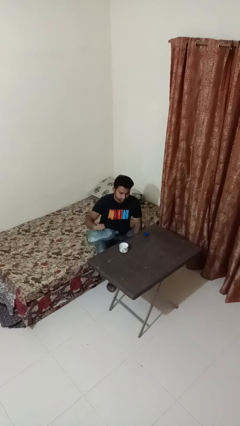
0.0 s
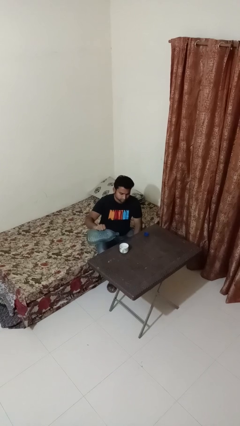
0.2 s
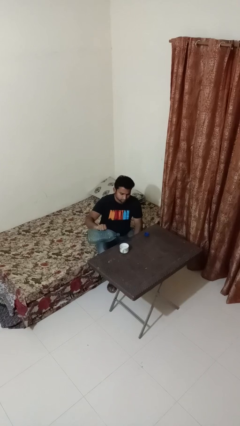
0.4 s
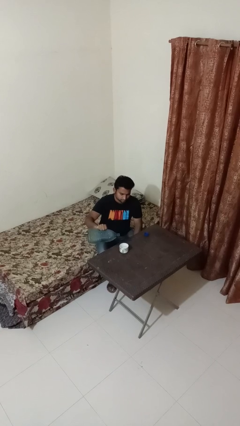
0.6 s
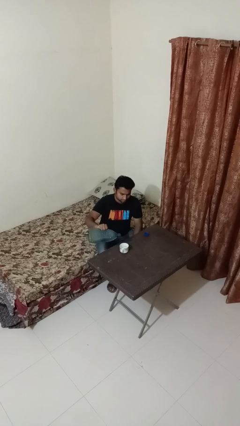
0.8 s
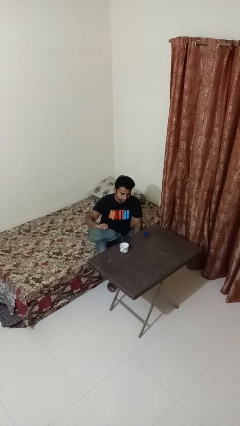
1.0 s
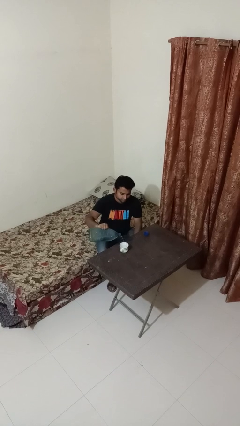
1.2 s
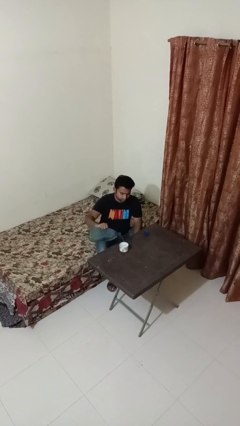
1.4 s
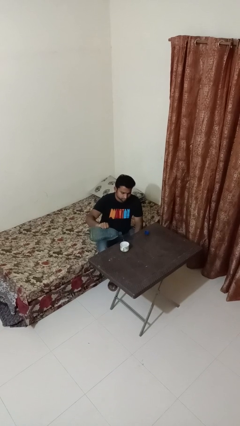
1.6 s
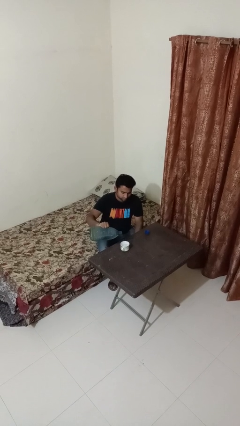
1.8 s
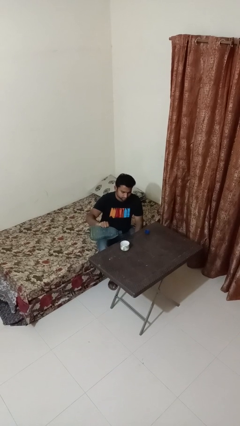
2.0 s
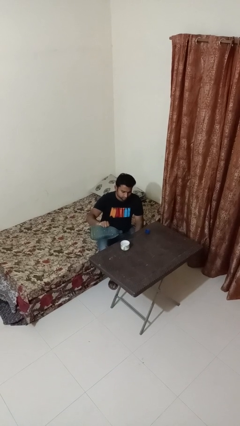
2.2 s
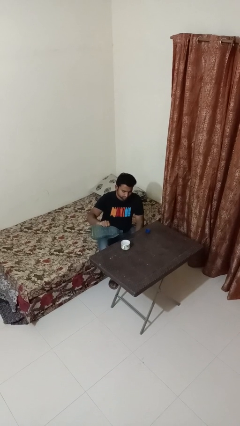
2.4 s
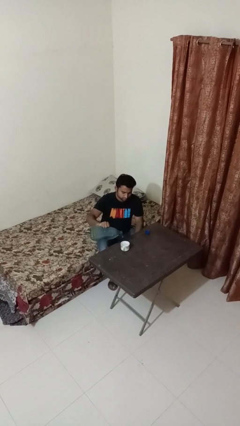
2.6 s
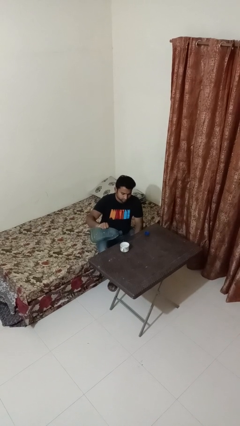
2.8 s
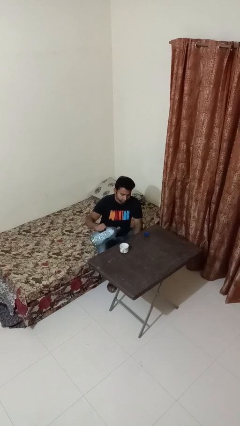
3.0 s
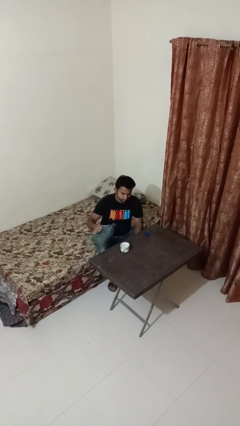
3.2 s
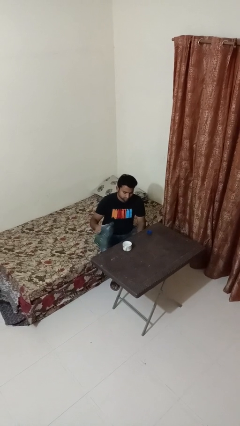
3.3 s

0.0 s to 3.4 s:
person pours liquid into cup

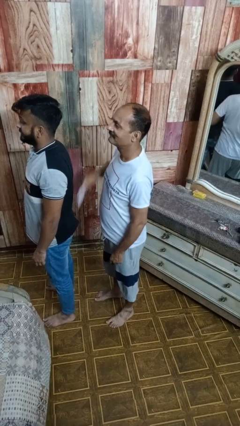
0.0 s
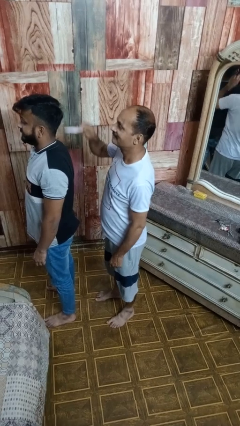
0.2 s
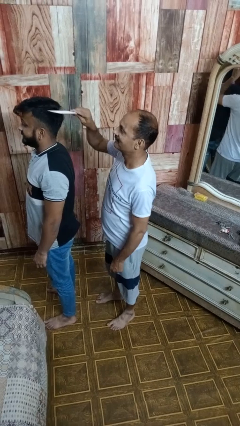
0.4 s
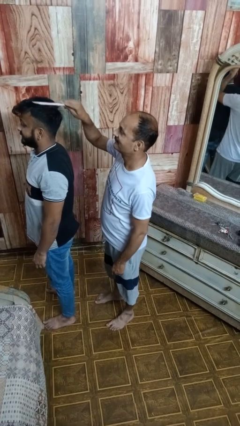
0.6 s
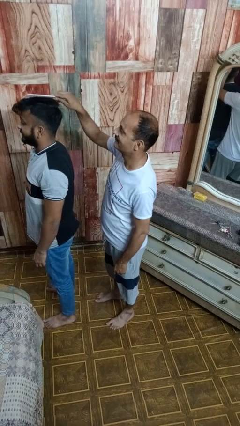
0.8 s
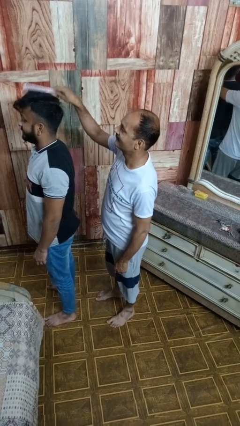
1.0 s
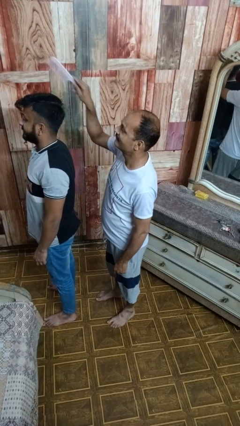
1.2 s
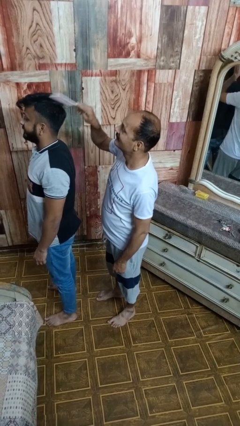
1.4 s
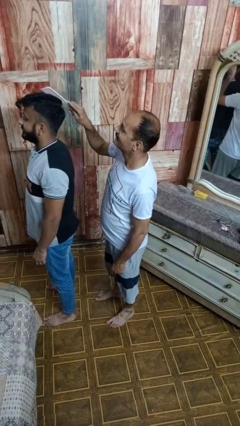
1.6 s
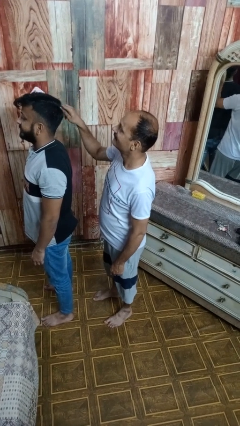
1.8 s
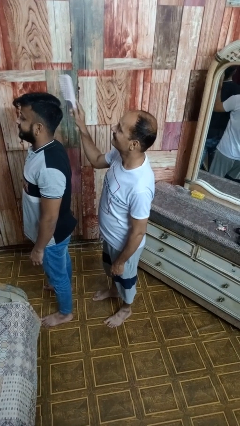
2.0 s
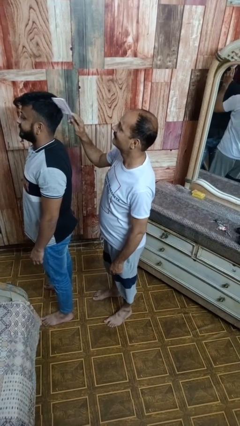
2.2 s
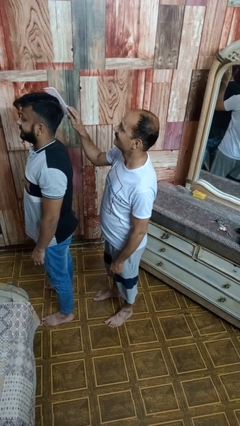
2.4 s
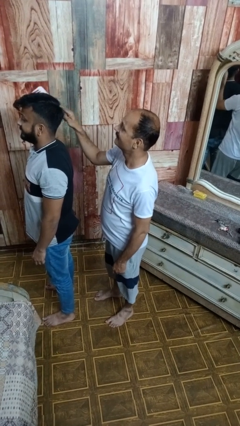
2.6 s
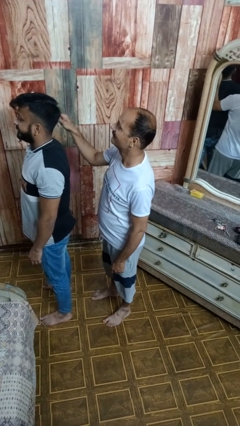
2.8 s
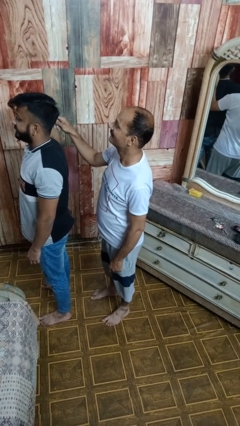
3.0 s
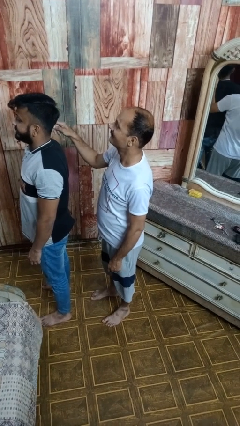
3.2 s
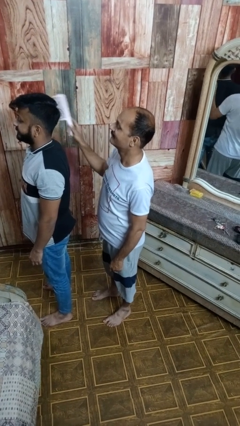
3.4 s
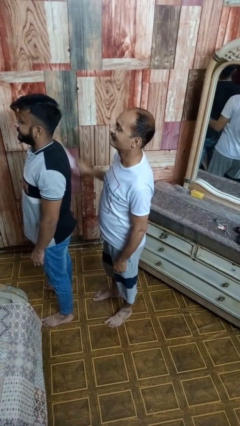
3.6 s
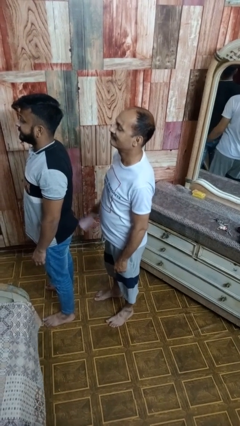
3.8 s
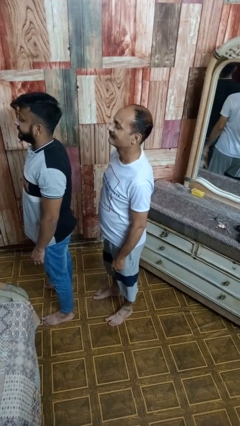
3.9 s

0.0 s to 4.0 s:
person brushes hair of person

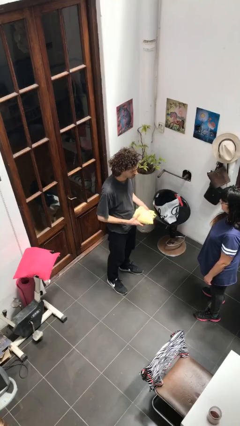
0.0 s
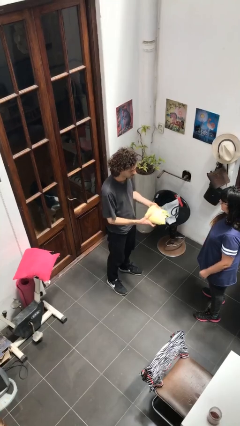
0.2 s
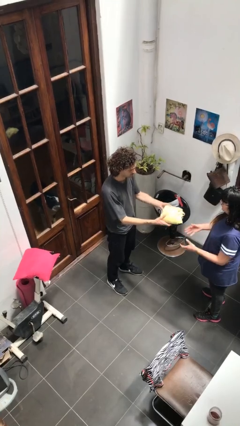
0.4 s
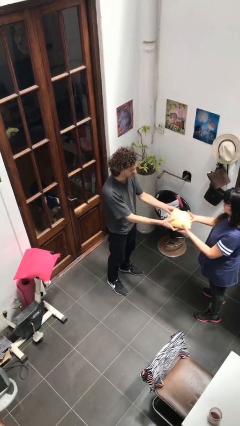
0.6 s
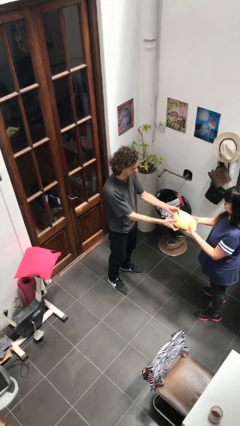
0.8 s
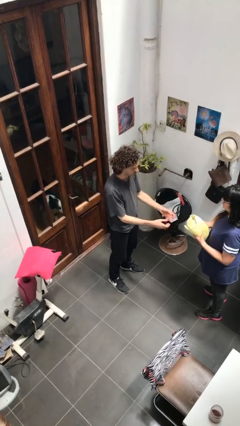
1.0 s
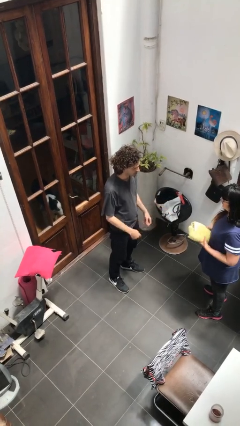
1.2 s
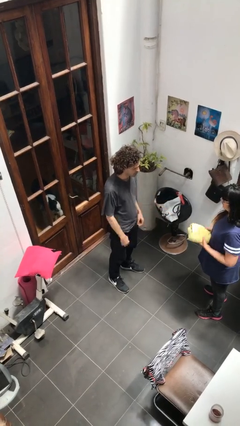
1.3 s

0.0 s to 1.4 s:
person transfers object to person

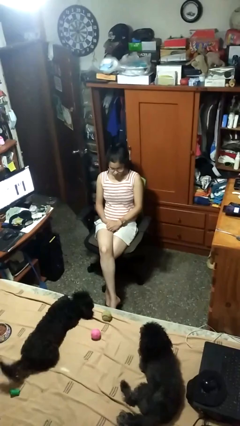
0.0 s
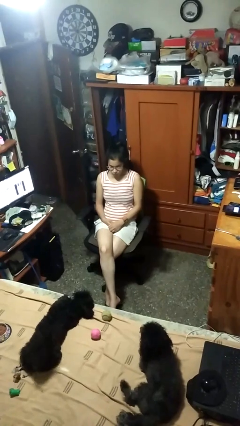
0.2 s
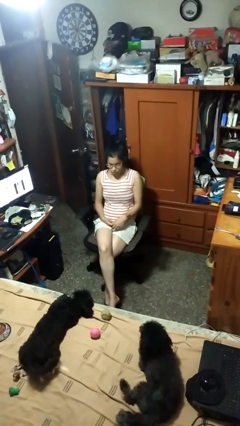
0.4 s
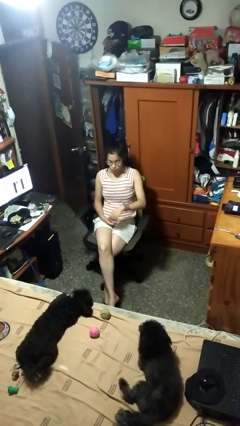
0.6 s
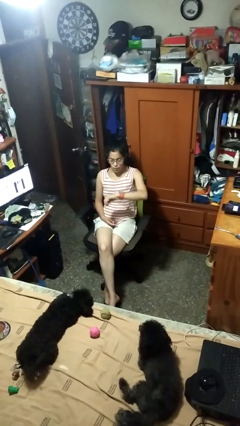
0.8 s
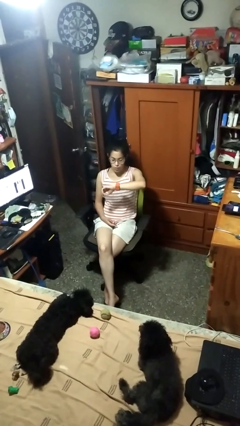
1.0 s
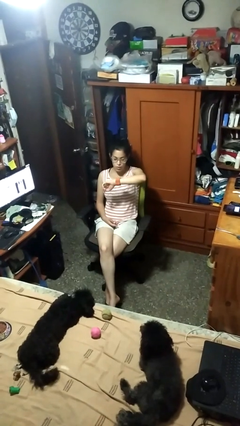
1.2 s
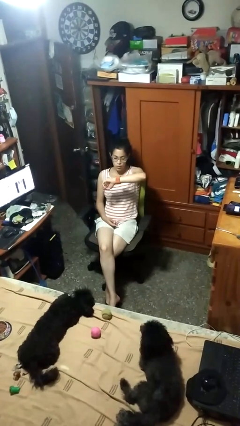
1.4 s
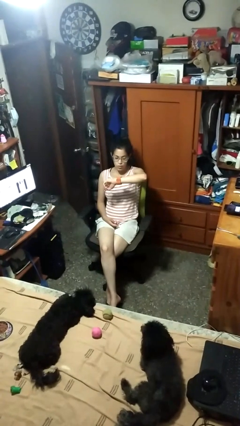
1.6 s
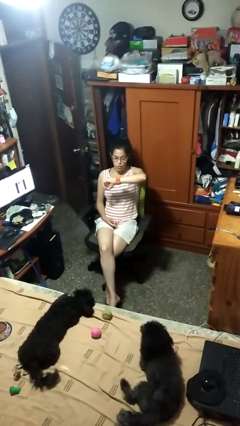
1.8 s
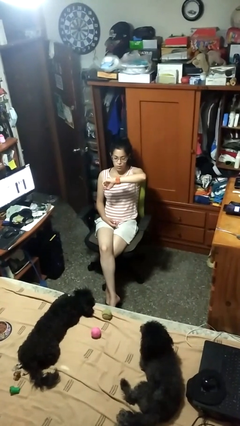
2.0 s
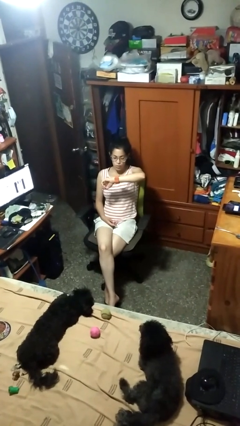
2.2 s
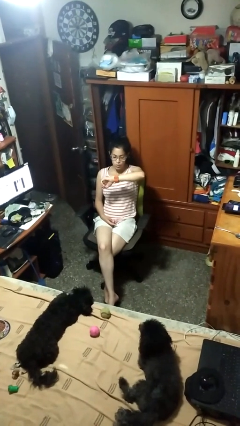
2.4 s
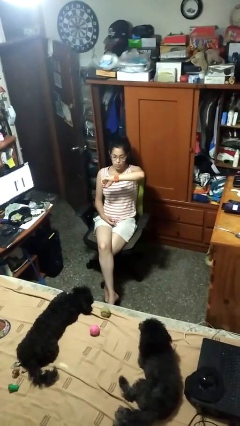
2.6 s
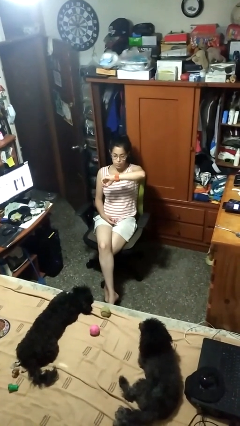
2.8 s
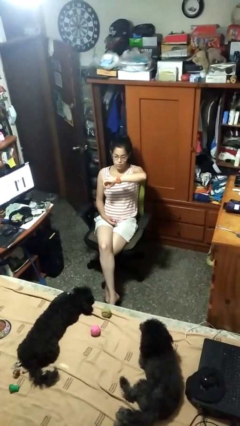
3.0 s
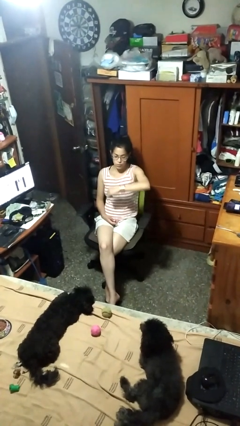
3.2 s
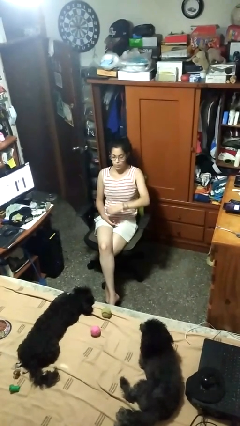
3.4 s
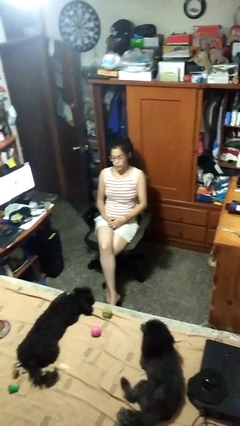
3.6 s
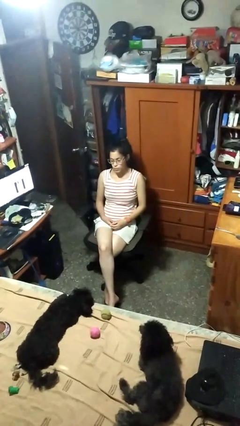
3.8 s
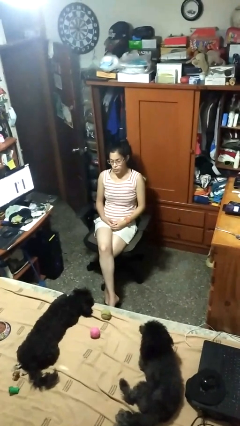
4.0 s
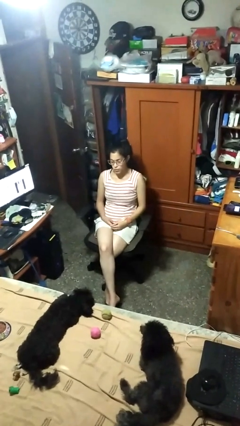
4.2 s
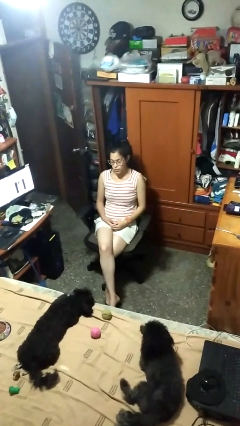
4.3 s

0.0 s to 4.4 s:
person looks at wristwatch

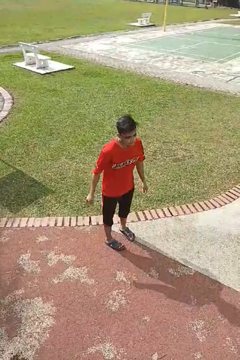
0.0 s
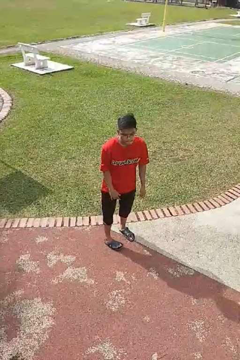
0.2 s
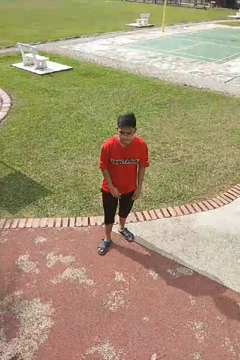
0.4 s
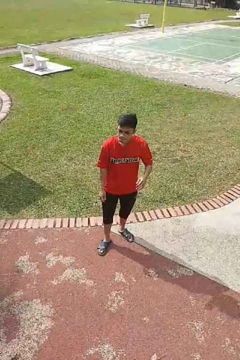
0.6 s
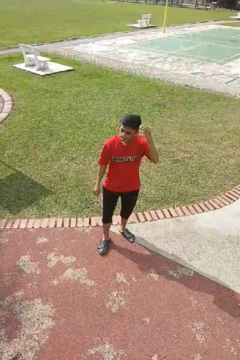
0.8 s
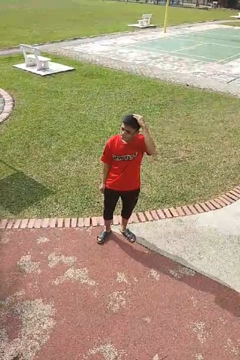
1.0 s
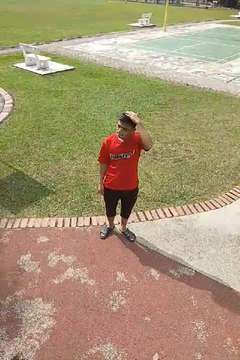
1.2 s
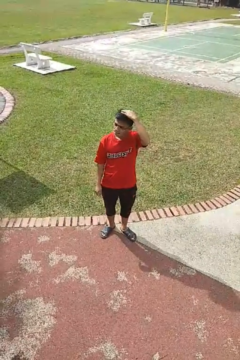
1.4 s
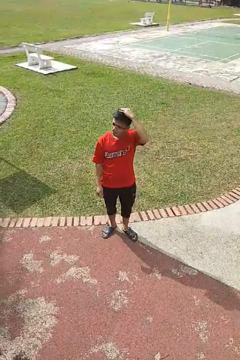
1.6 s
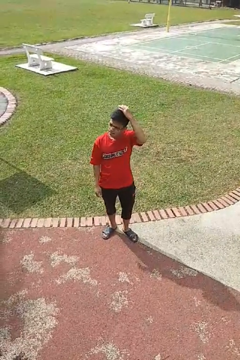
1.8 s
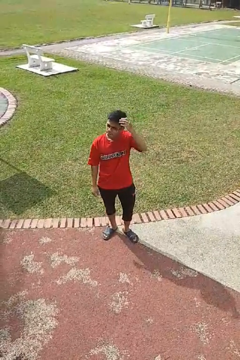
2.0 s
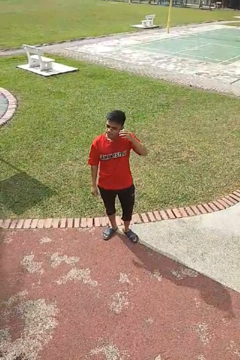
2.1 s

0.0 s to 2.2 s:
person pats head

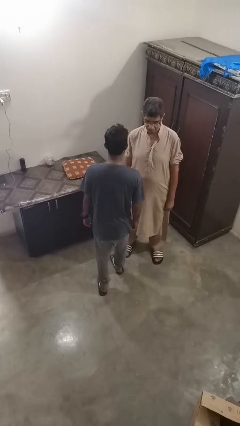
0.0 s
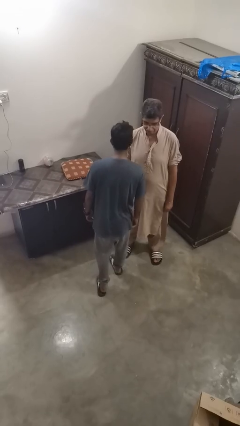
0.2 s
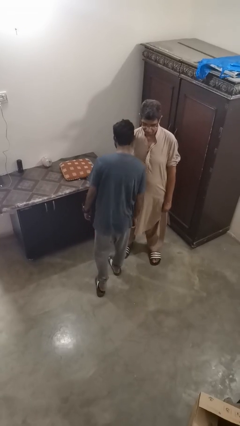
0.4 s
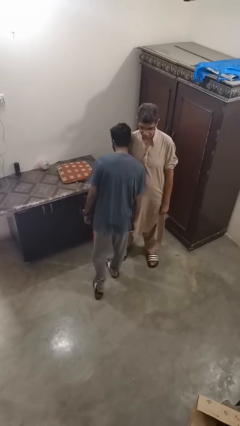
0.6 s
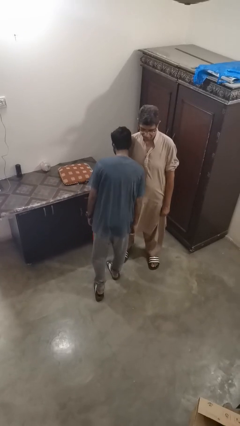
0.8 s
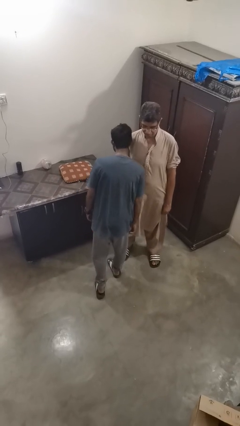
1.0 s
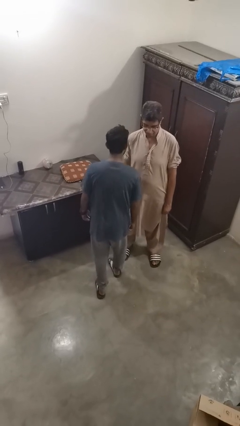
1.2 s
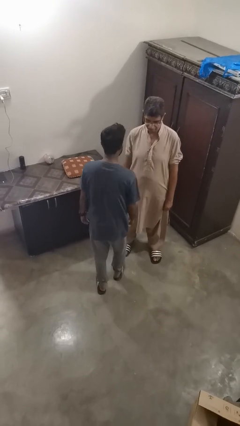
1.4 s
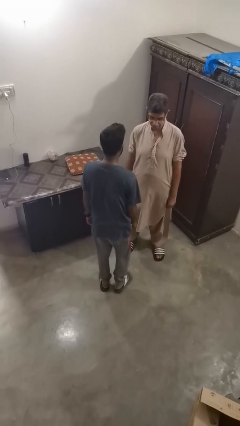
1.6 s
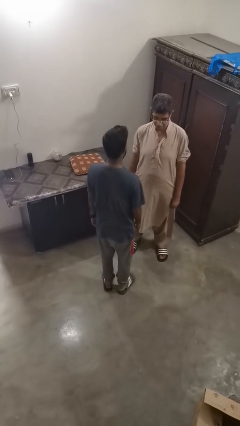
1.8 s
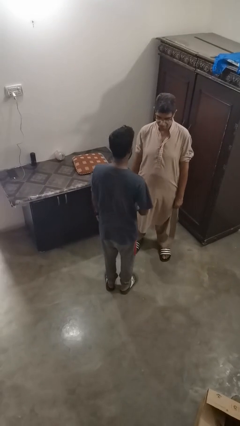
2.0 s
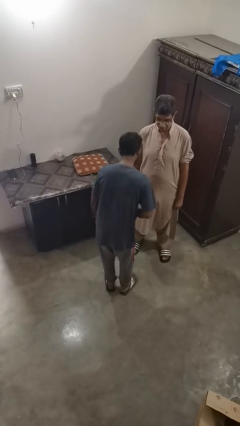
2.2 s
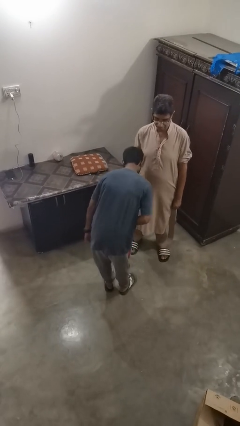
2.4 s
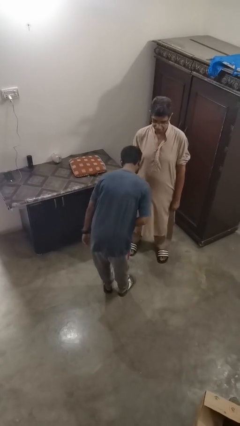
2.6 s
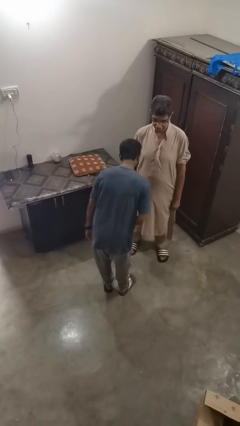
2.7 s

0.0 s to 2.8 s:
person bumps into person
